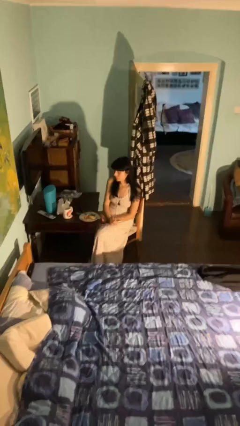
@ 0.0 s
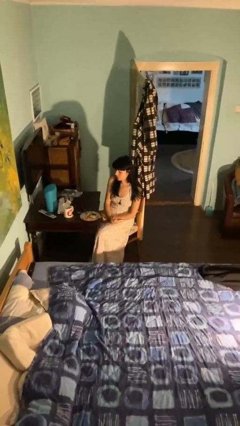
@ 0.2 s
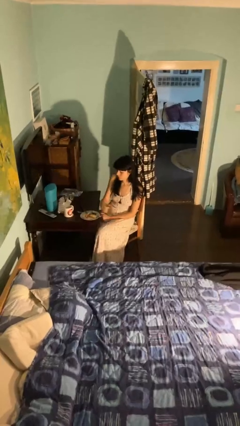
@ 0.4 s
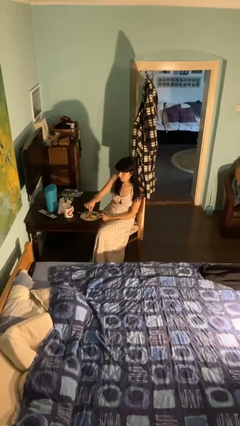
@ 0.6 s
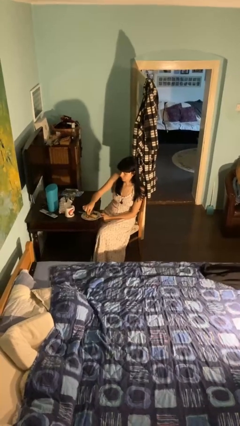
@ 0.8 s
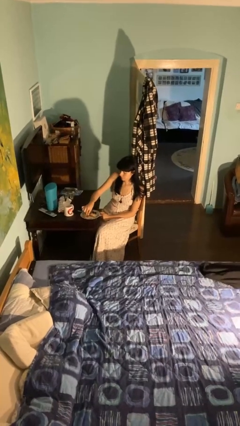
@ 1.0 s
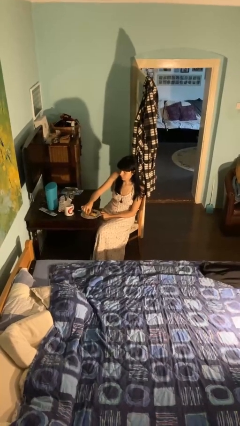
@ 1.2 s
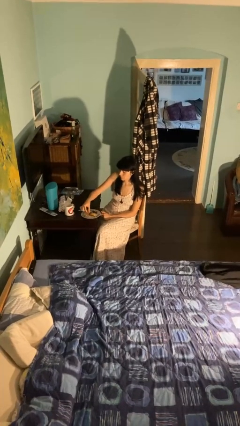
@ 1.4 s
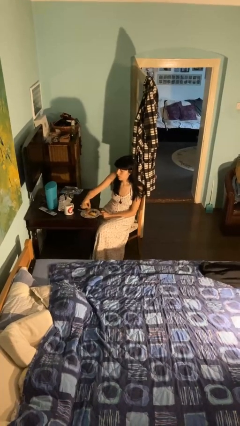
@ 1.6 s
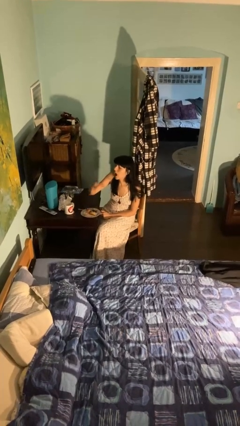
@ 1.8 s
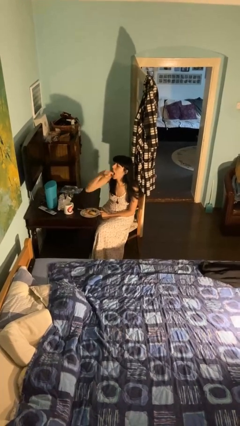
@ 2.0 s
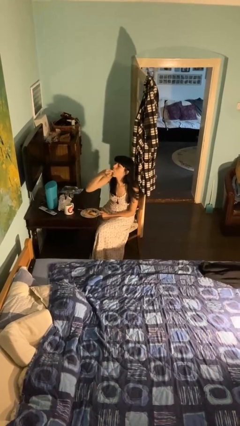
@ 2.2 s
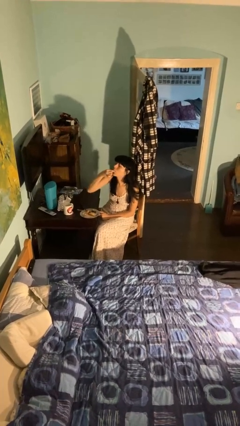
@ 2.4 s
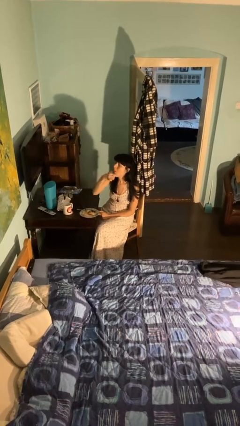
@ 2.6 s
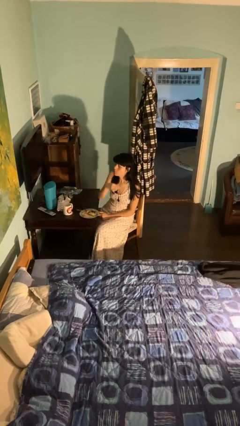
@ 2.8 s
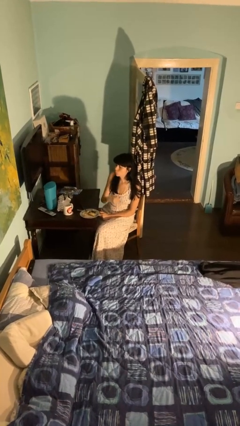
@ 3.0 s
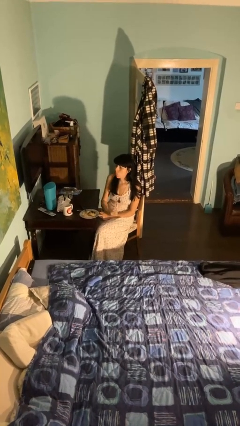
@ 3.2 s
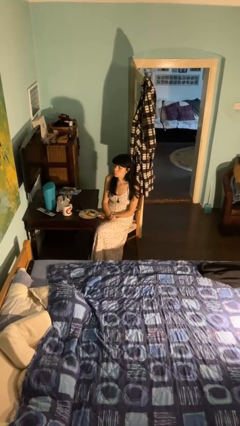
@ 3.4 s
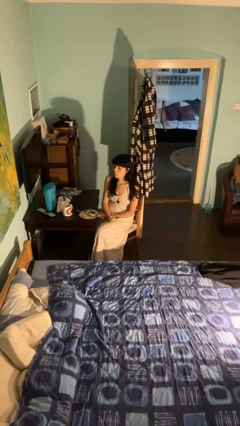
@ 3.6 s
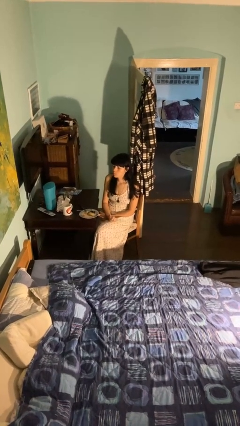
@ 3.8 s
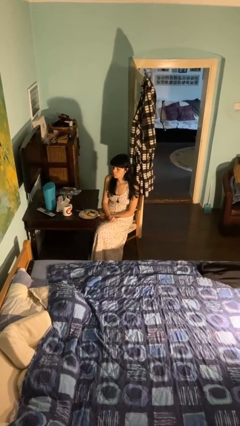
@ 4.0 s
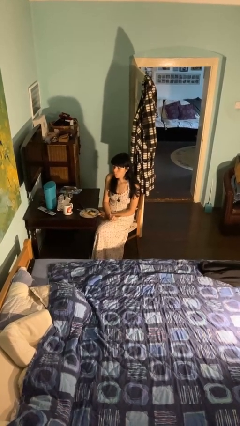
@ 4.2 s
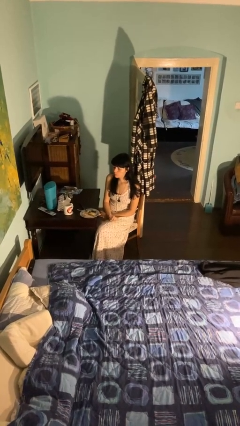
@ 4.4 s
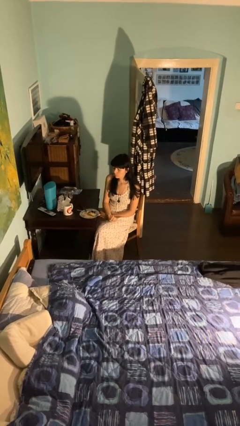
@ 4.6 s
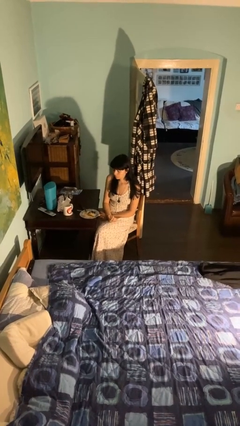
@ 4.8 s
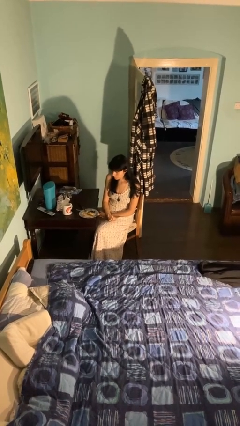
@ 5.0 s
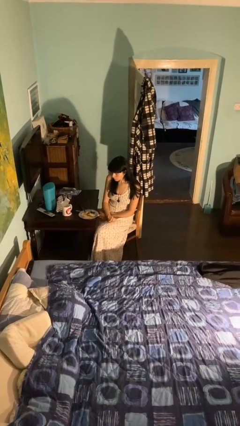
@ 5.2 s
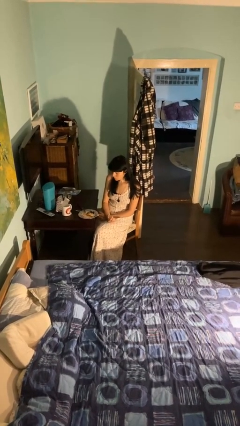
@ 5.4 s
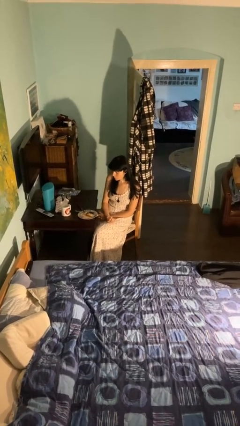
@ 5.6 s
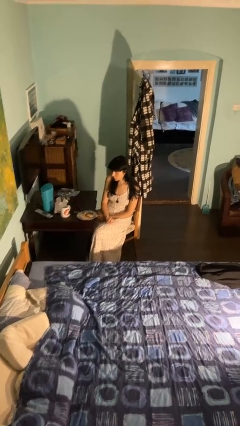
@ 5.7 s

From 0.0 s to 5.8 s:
person eats with hands

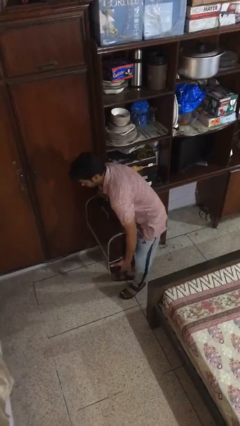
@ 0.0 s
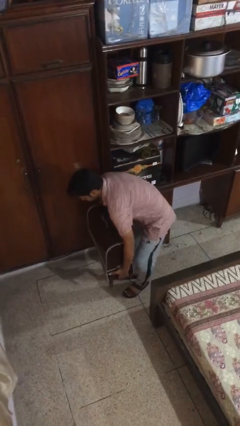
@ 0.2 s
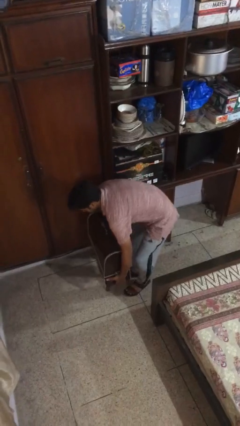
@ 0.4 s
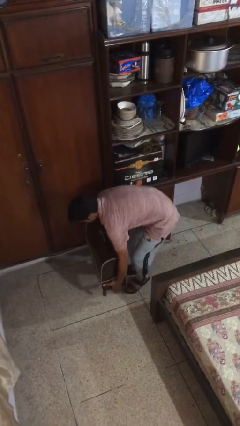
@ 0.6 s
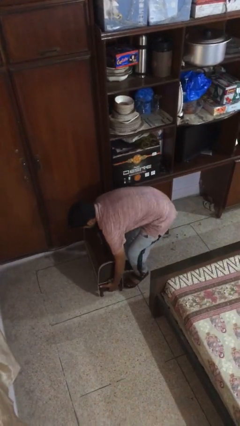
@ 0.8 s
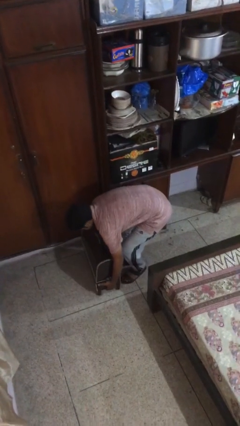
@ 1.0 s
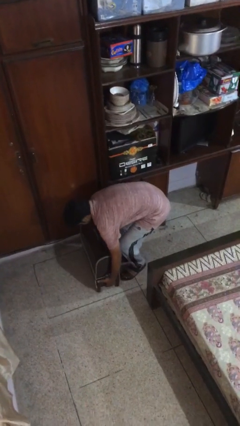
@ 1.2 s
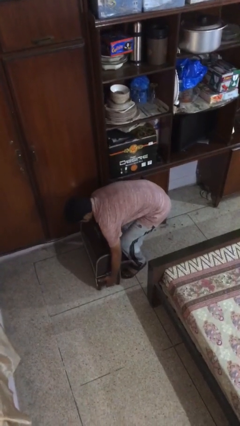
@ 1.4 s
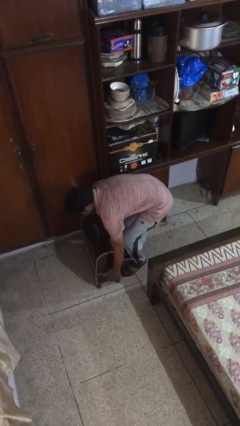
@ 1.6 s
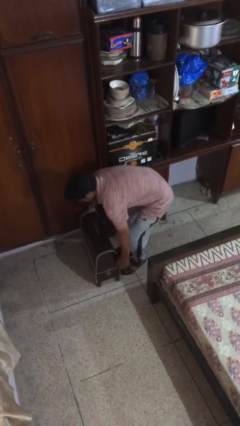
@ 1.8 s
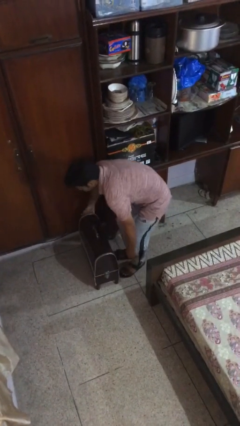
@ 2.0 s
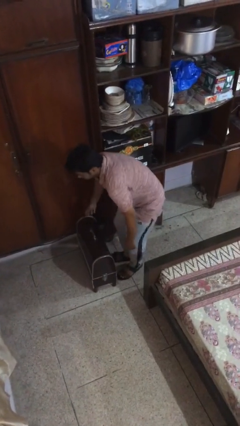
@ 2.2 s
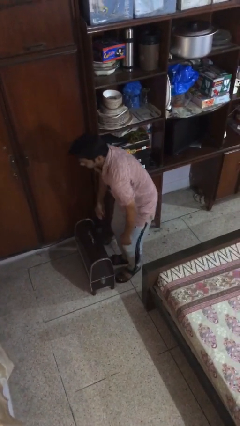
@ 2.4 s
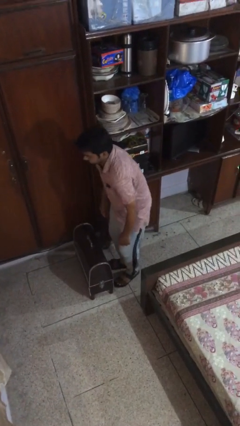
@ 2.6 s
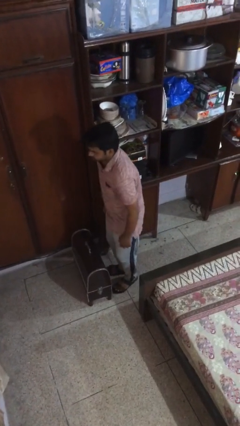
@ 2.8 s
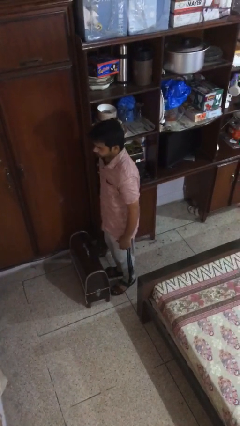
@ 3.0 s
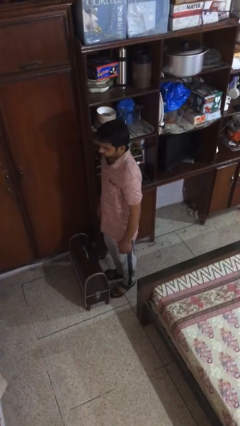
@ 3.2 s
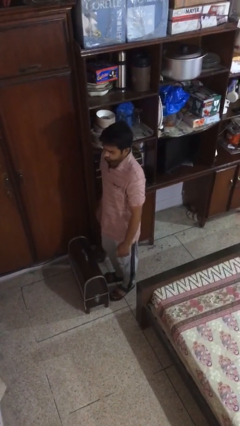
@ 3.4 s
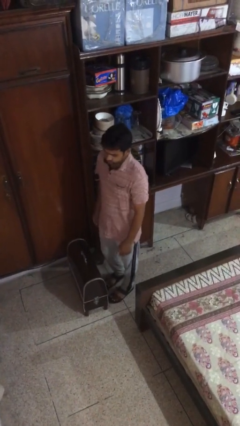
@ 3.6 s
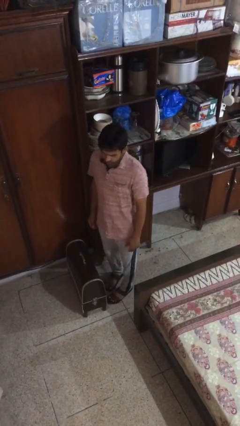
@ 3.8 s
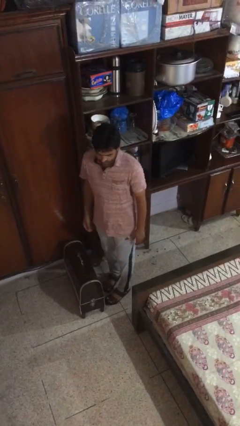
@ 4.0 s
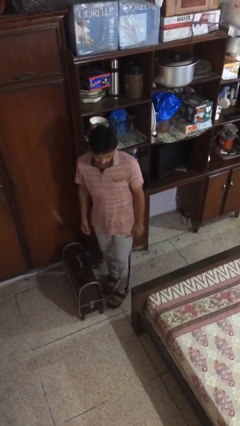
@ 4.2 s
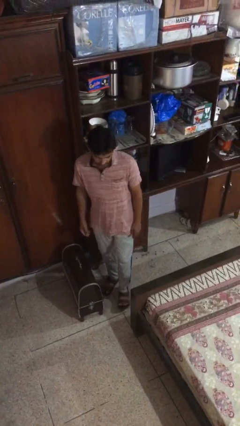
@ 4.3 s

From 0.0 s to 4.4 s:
person puts down object on floor

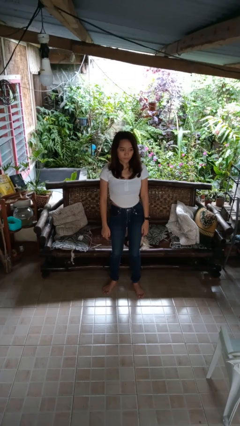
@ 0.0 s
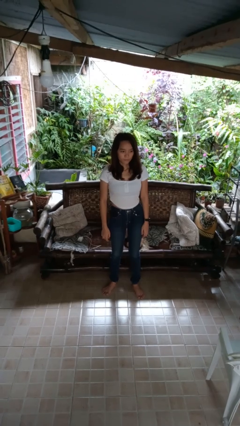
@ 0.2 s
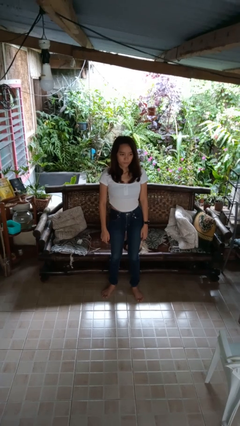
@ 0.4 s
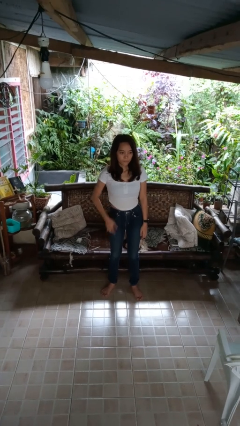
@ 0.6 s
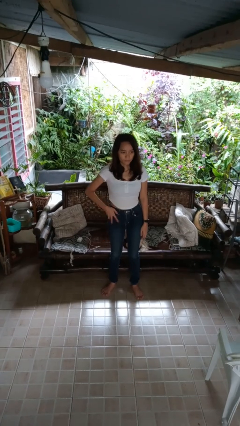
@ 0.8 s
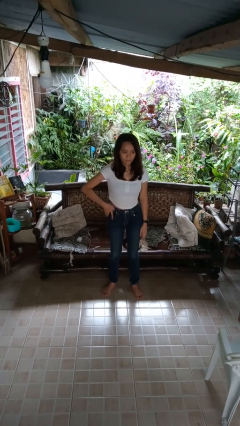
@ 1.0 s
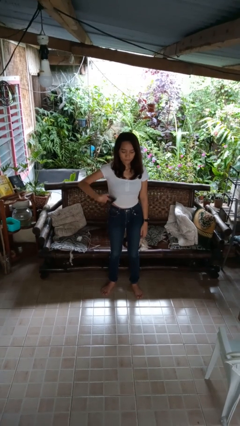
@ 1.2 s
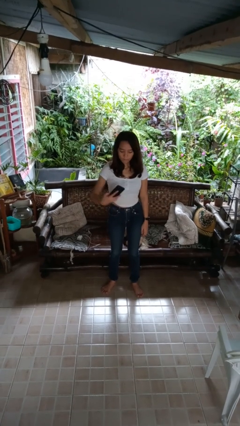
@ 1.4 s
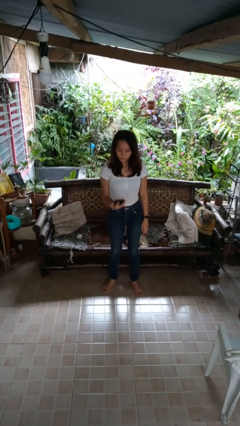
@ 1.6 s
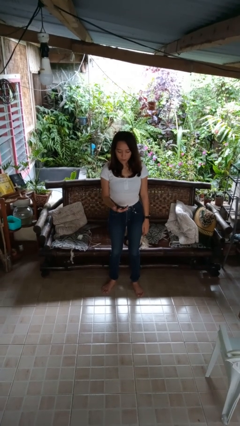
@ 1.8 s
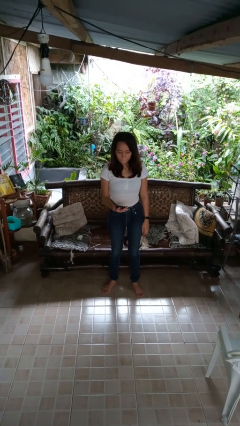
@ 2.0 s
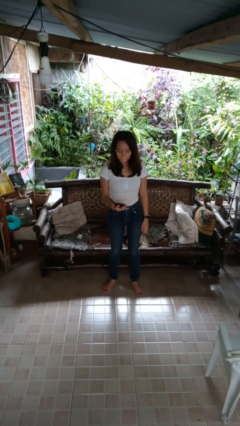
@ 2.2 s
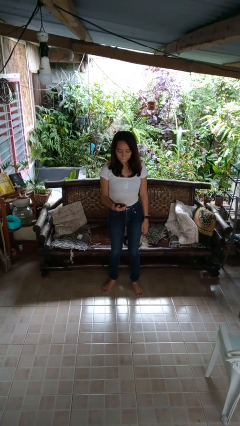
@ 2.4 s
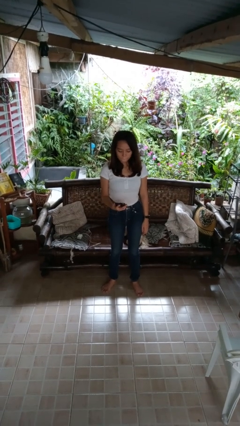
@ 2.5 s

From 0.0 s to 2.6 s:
person takes phone from pocket

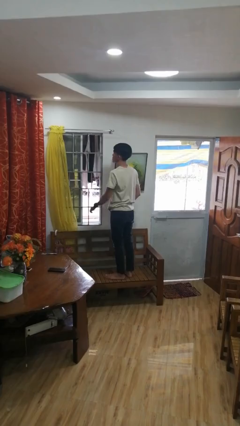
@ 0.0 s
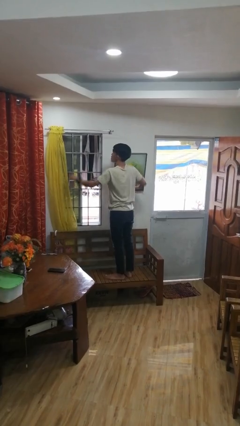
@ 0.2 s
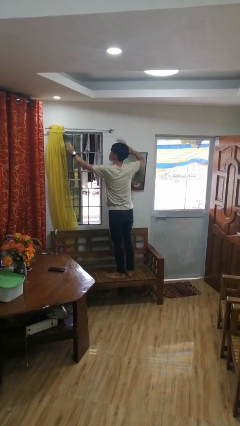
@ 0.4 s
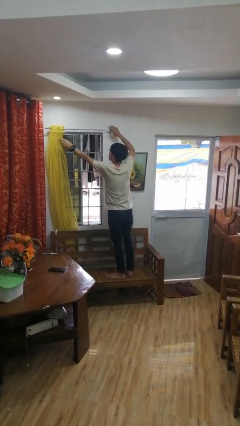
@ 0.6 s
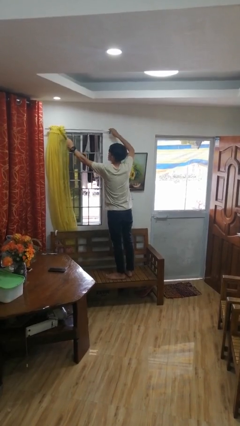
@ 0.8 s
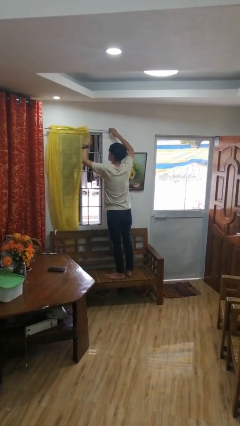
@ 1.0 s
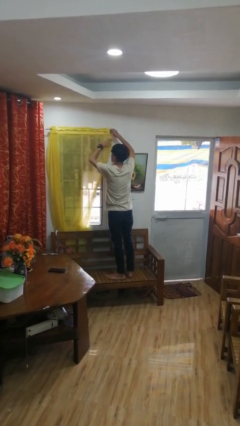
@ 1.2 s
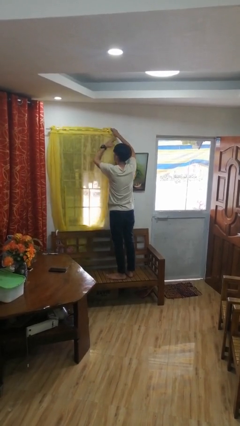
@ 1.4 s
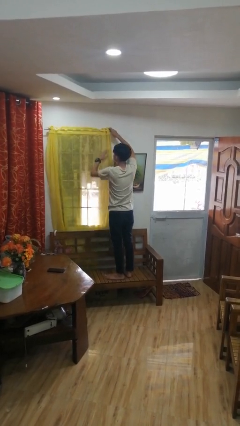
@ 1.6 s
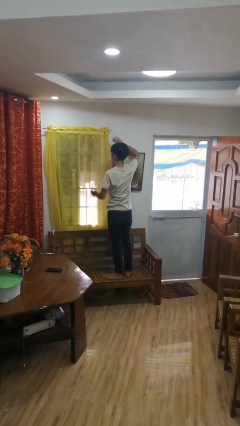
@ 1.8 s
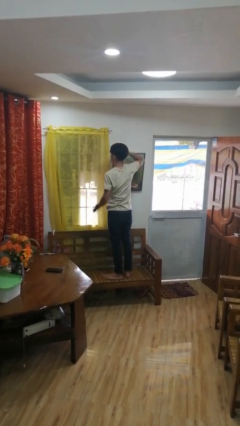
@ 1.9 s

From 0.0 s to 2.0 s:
person closes curtains

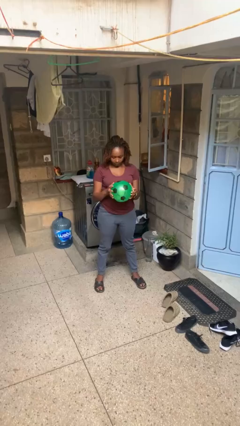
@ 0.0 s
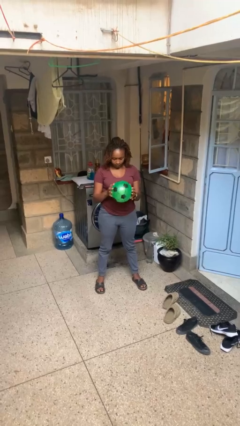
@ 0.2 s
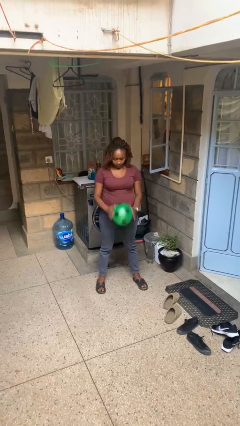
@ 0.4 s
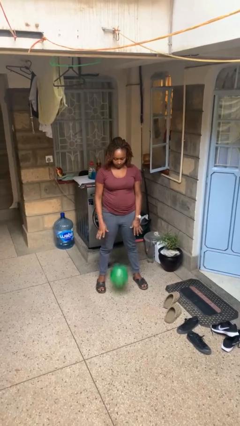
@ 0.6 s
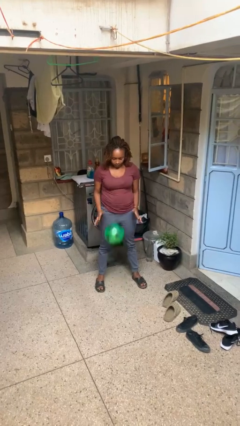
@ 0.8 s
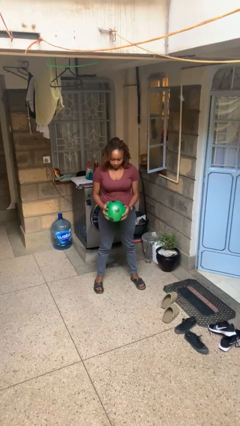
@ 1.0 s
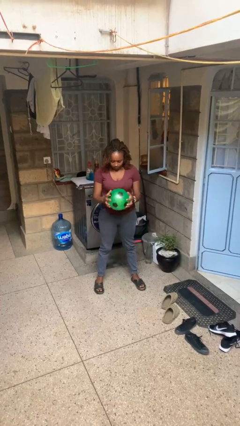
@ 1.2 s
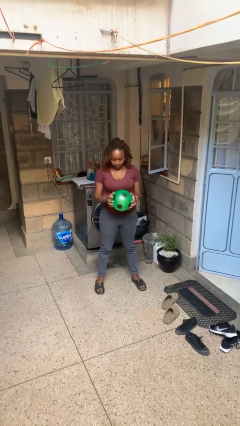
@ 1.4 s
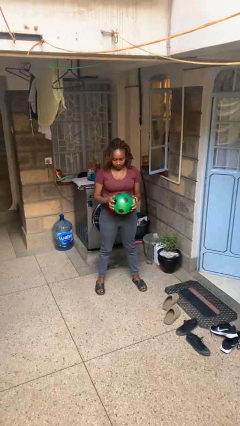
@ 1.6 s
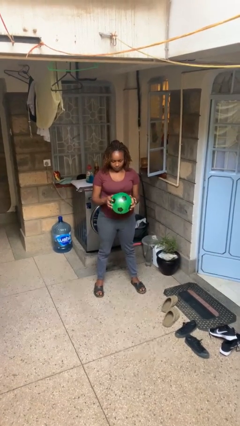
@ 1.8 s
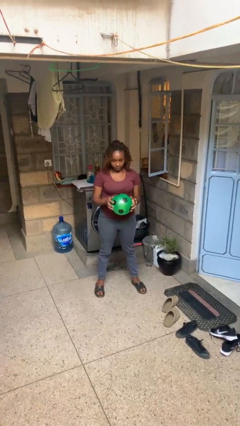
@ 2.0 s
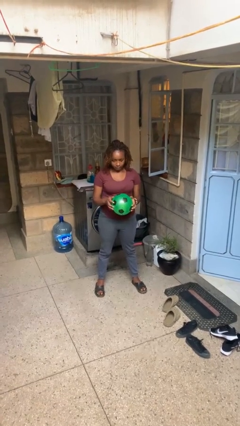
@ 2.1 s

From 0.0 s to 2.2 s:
person bounces ball on floor

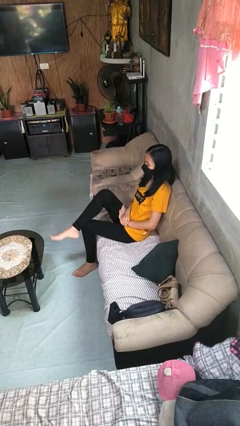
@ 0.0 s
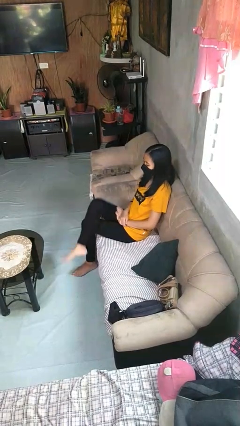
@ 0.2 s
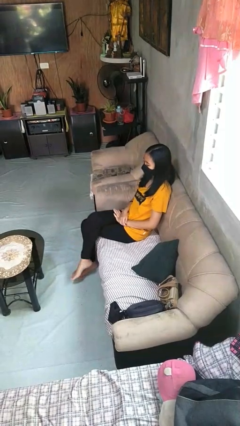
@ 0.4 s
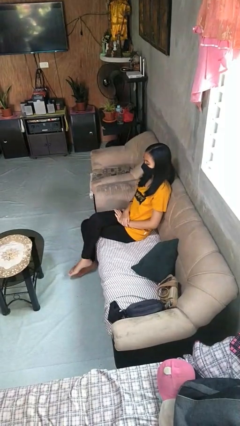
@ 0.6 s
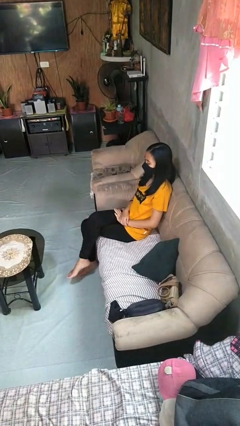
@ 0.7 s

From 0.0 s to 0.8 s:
person crosses legs
